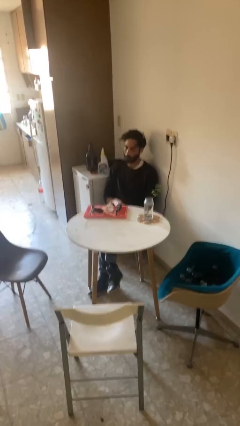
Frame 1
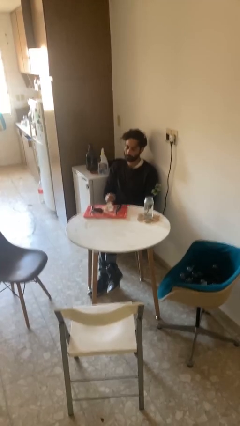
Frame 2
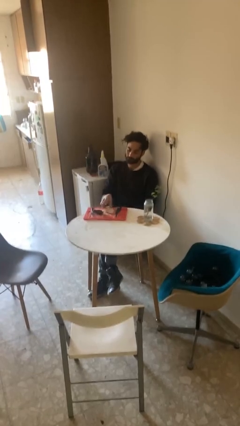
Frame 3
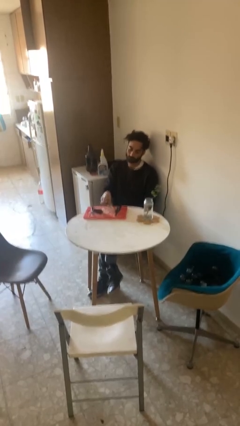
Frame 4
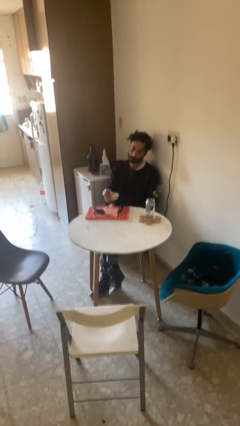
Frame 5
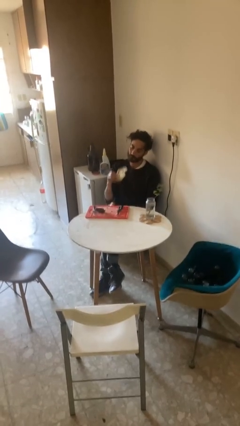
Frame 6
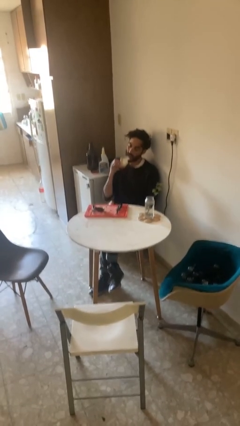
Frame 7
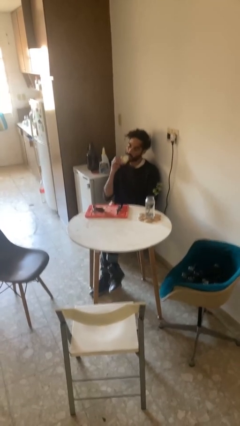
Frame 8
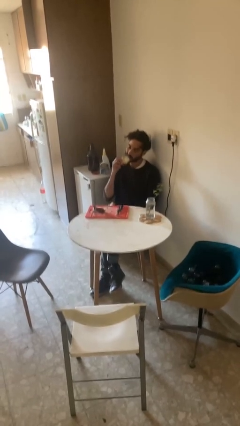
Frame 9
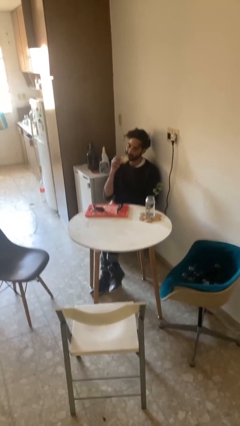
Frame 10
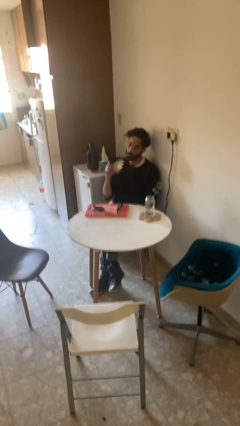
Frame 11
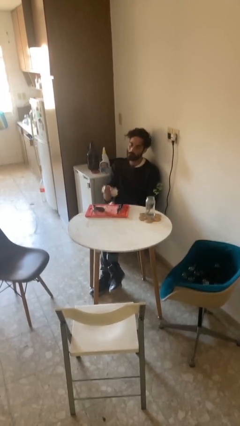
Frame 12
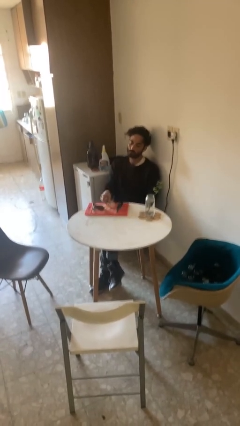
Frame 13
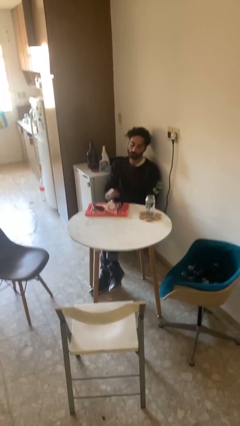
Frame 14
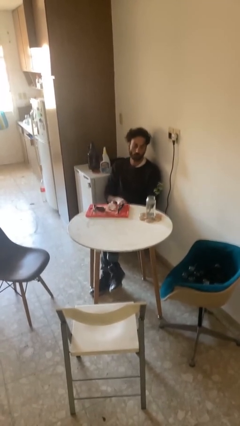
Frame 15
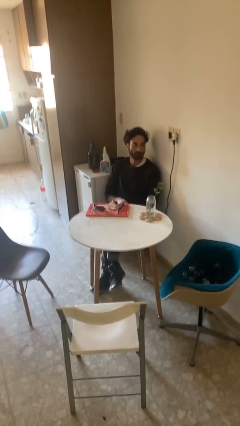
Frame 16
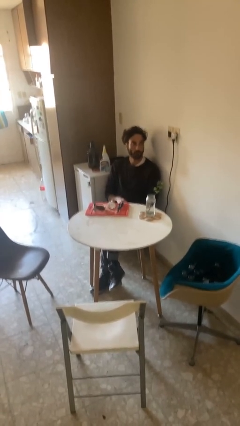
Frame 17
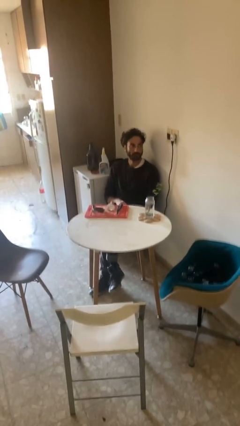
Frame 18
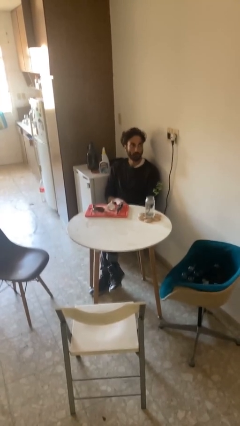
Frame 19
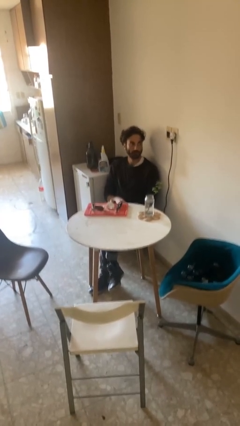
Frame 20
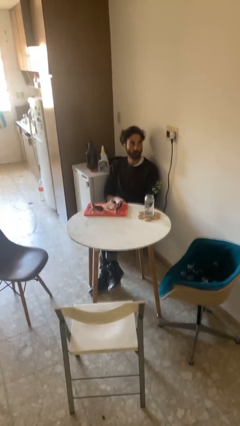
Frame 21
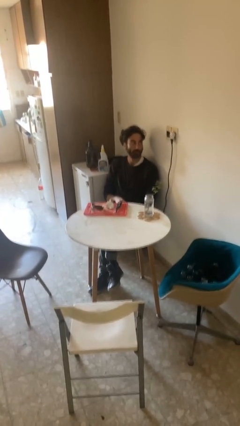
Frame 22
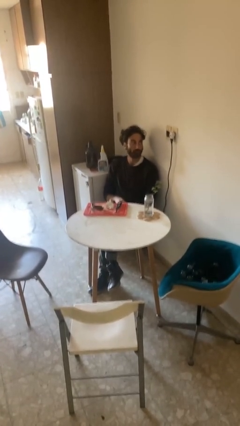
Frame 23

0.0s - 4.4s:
person eats with hands

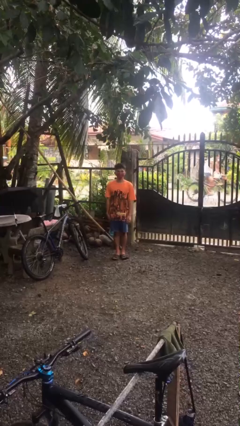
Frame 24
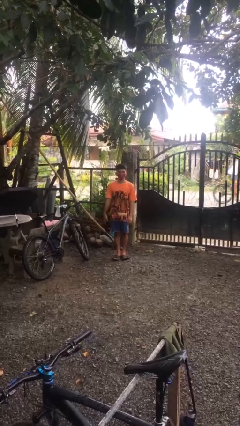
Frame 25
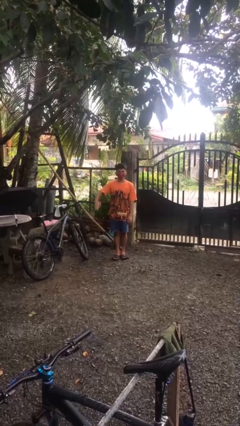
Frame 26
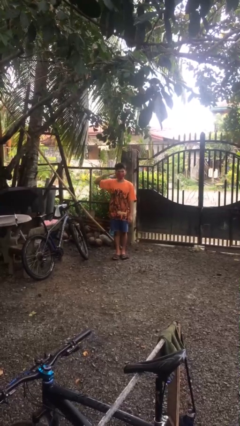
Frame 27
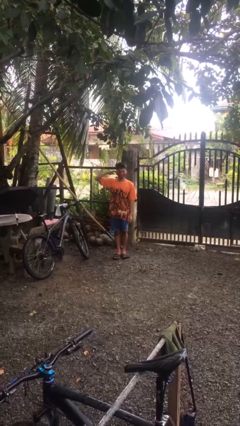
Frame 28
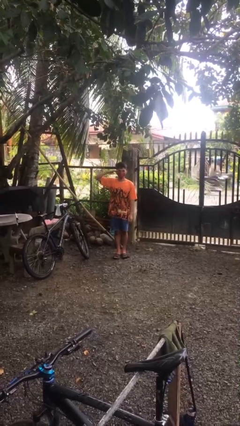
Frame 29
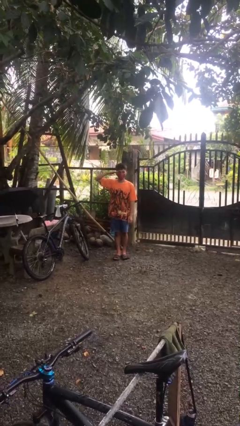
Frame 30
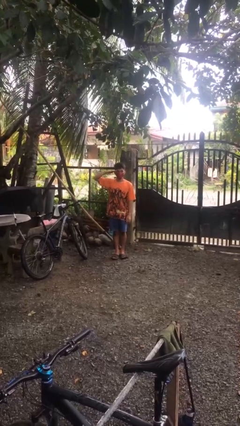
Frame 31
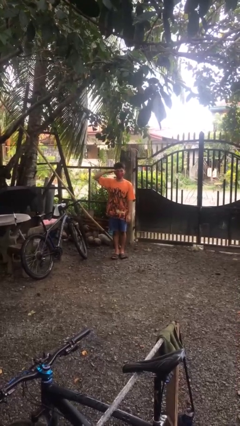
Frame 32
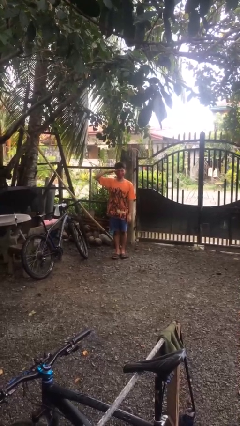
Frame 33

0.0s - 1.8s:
person salutes

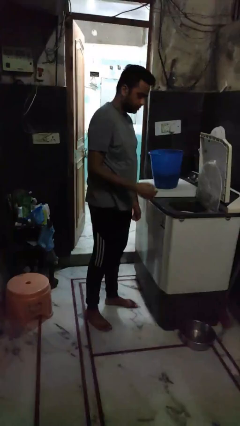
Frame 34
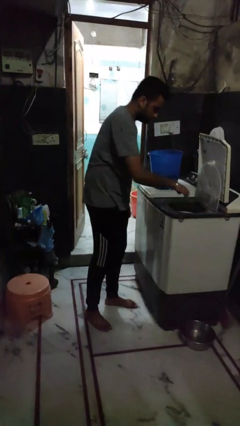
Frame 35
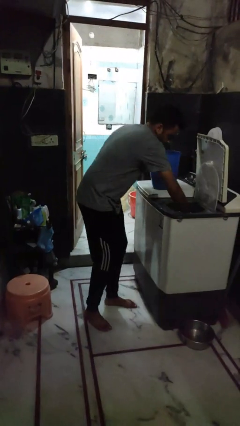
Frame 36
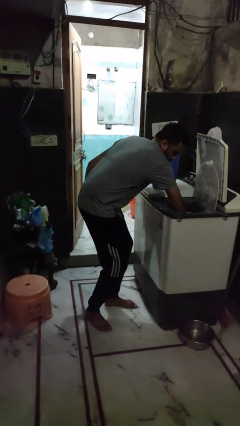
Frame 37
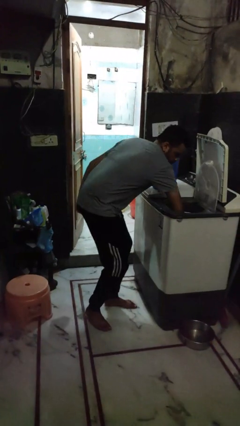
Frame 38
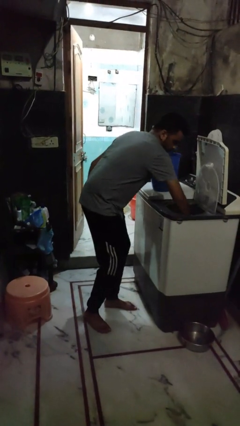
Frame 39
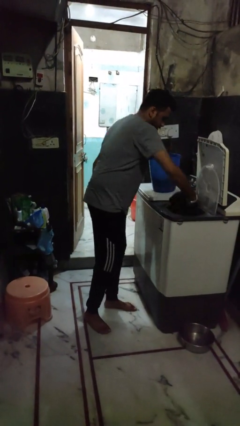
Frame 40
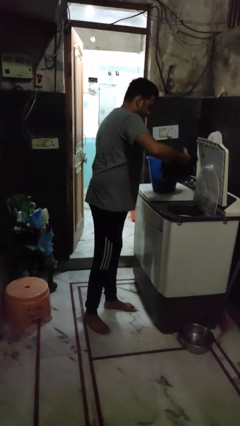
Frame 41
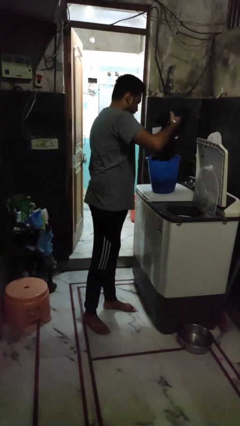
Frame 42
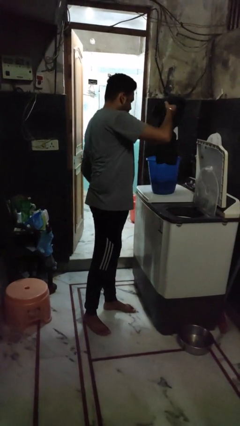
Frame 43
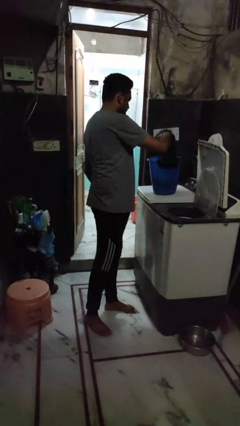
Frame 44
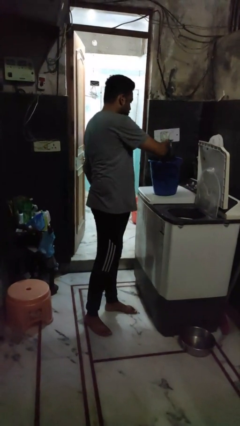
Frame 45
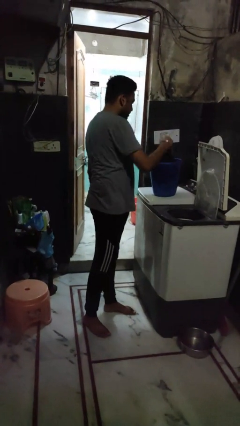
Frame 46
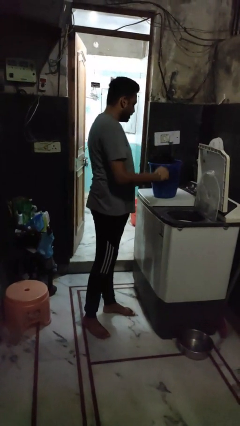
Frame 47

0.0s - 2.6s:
person unloads dryer

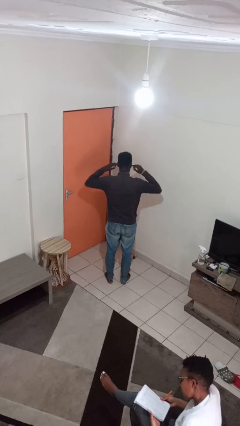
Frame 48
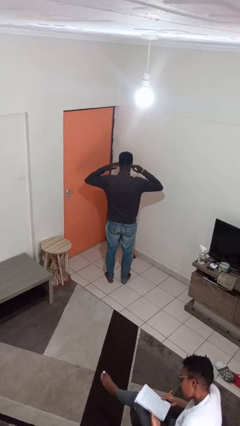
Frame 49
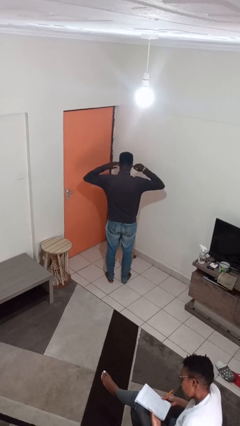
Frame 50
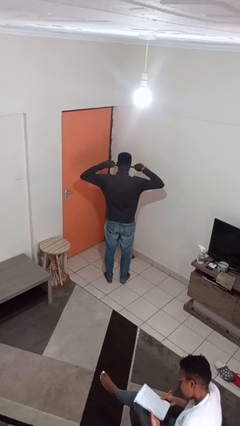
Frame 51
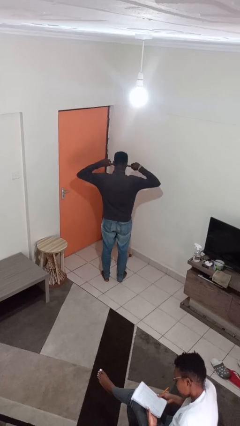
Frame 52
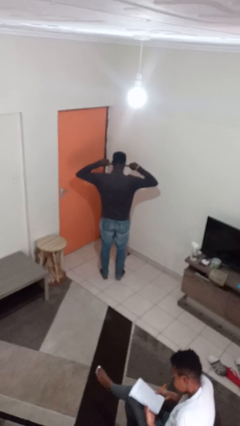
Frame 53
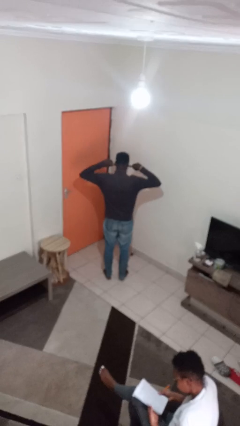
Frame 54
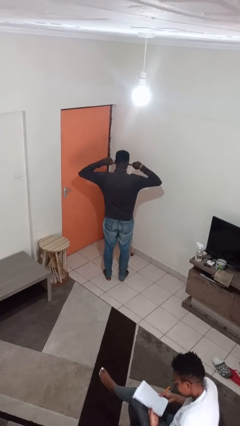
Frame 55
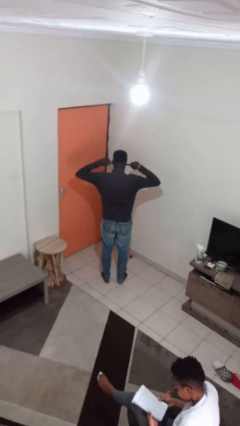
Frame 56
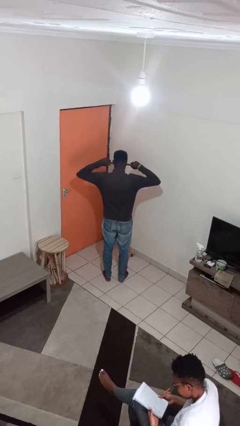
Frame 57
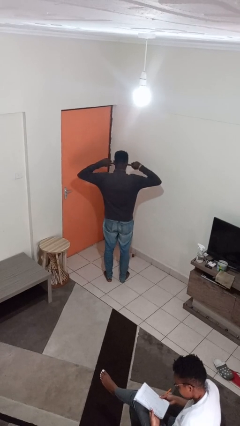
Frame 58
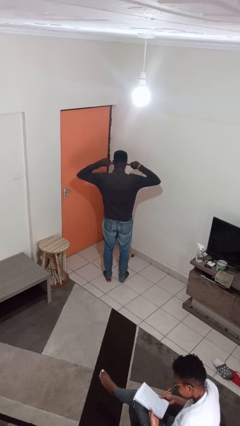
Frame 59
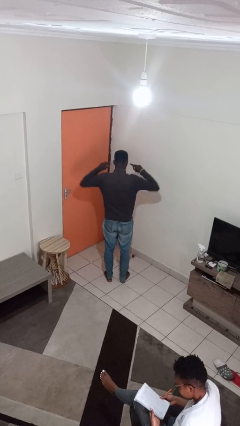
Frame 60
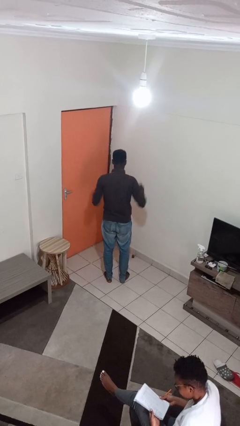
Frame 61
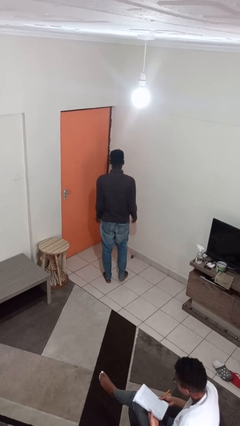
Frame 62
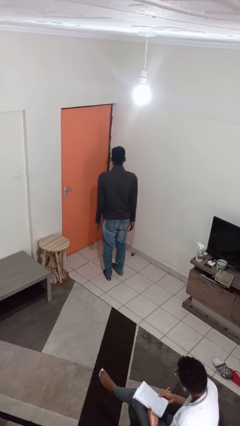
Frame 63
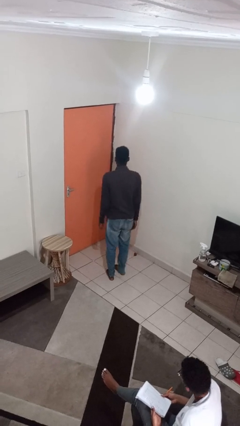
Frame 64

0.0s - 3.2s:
person puts fingers in ear

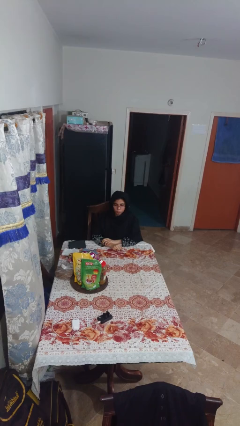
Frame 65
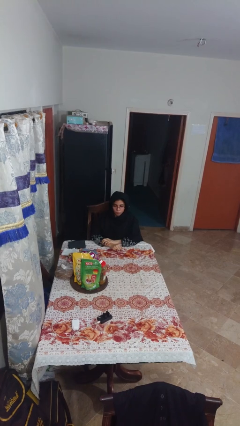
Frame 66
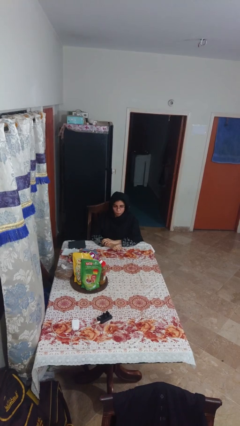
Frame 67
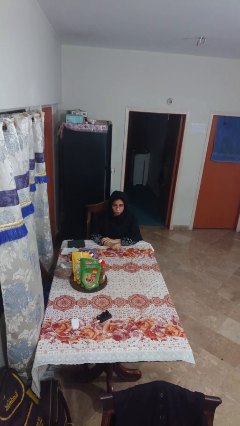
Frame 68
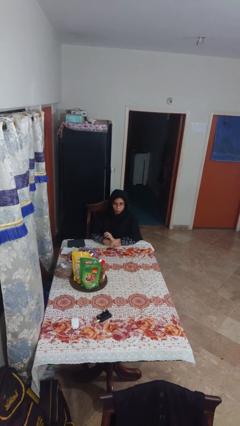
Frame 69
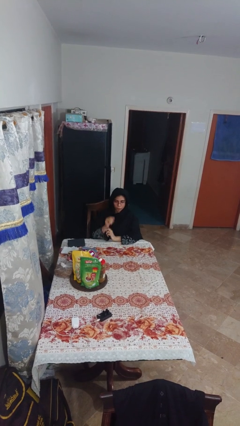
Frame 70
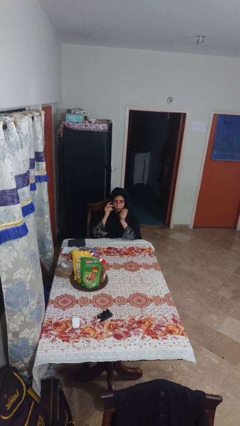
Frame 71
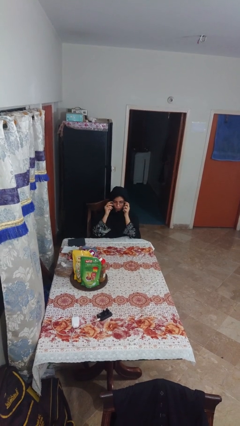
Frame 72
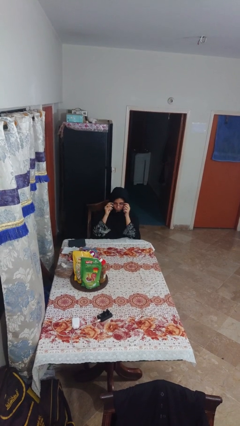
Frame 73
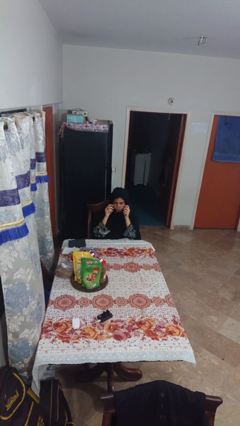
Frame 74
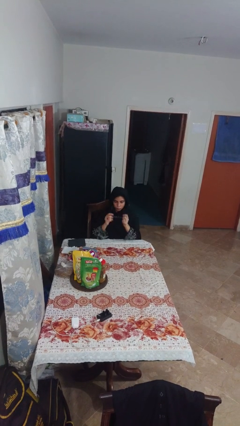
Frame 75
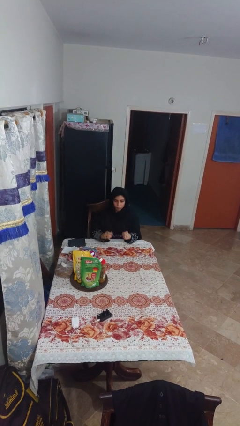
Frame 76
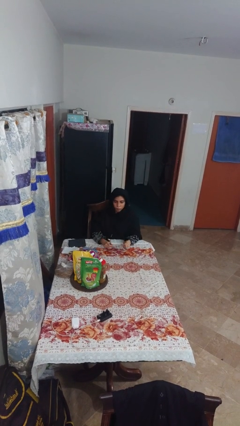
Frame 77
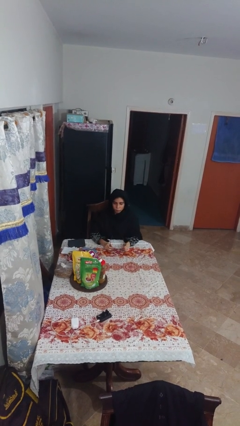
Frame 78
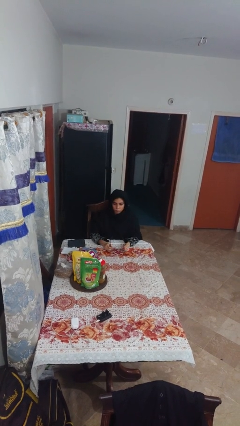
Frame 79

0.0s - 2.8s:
person takes off glasses

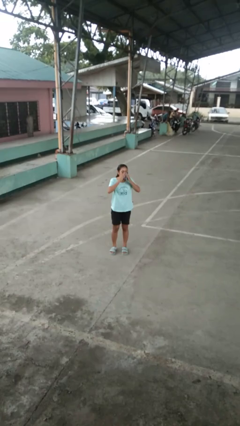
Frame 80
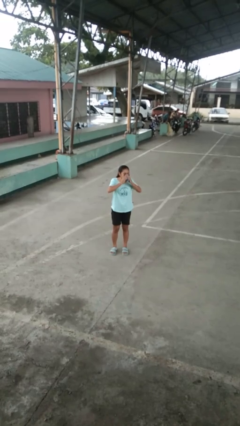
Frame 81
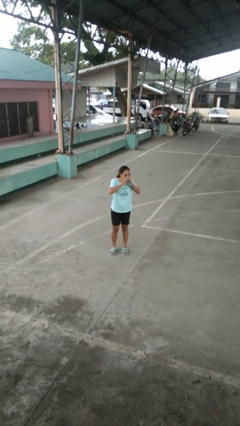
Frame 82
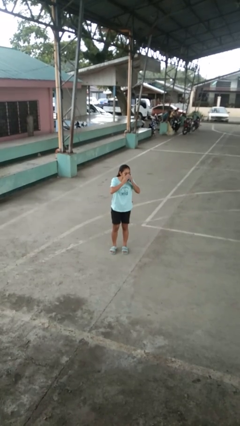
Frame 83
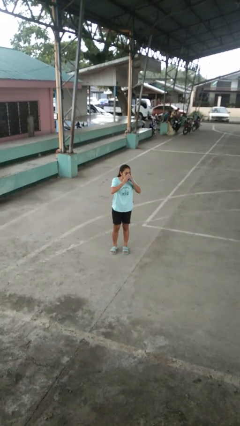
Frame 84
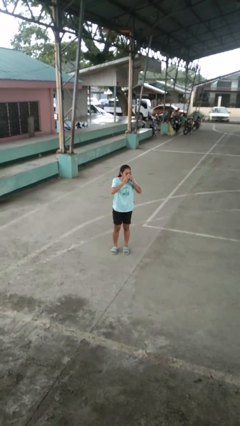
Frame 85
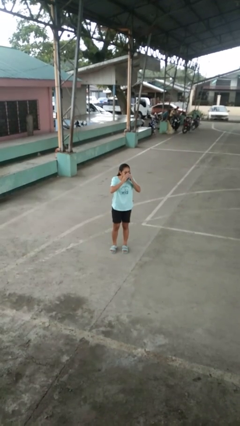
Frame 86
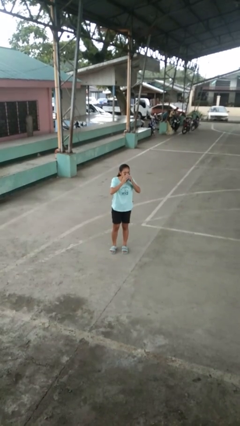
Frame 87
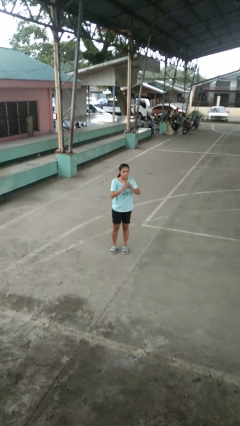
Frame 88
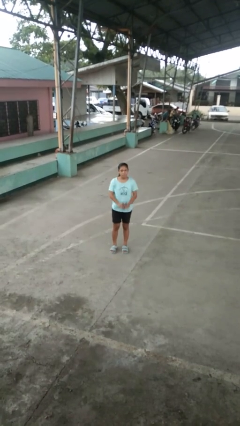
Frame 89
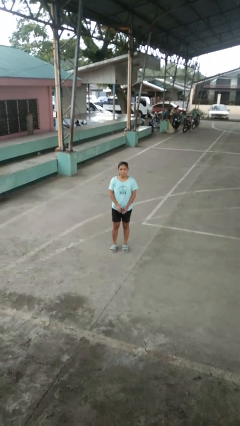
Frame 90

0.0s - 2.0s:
person blows nose

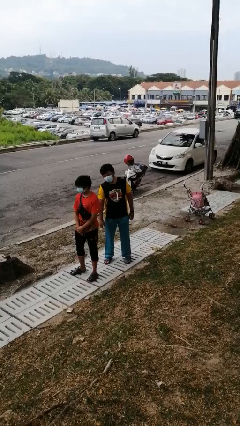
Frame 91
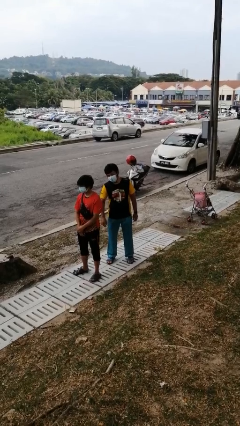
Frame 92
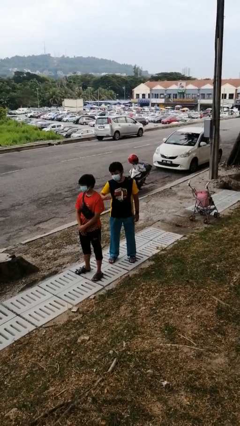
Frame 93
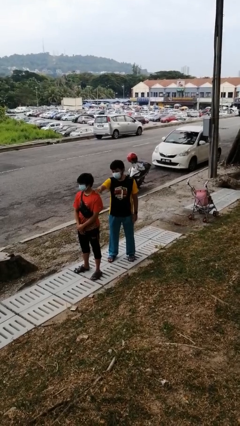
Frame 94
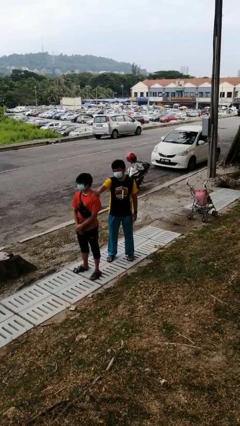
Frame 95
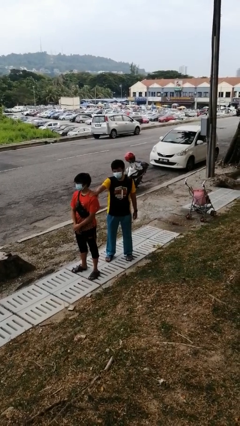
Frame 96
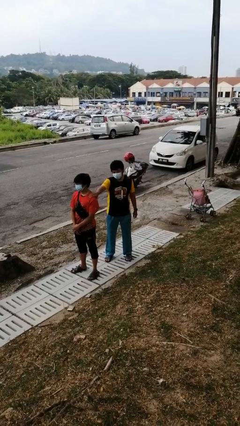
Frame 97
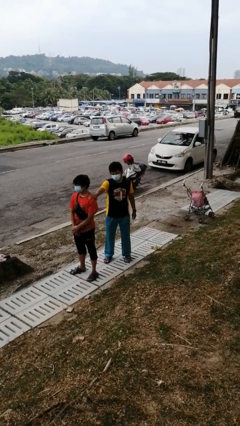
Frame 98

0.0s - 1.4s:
person grabs person by shoulder
